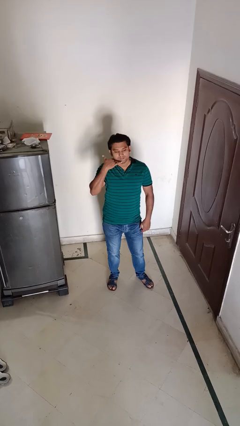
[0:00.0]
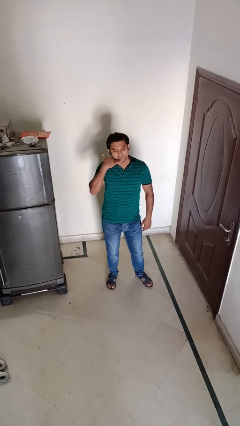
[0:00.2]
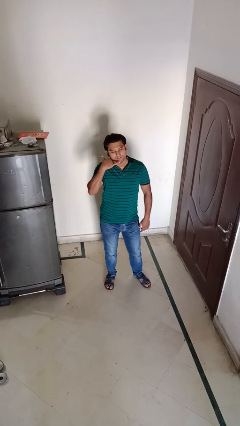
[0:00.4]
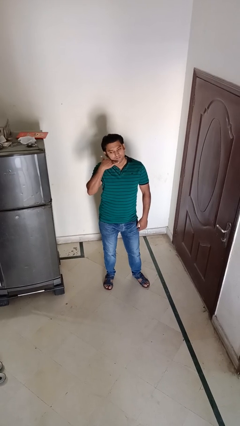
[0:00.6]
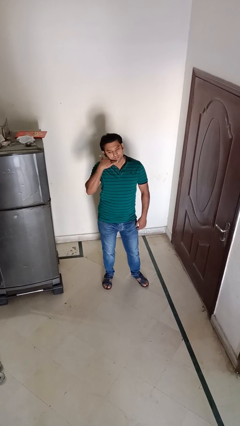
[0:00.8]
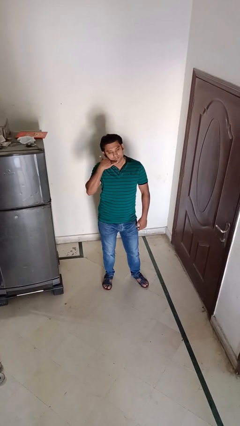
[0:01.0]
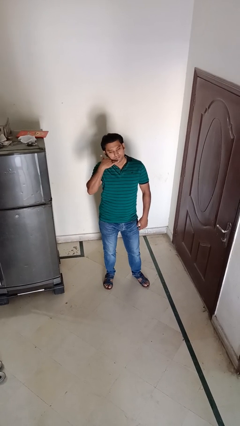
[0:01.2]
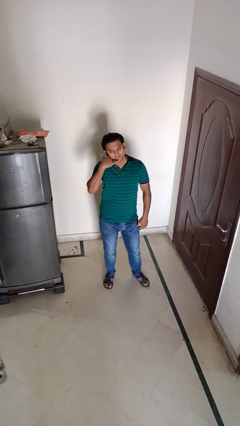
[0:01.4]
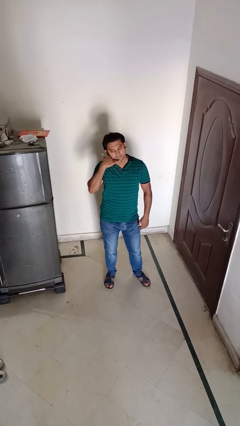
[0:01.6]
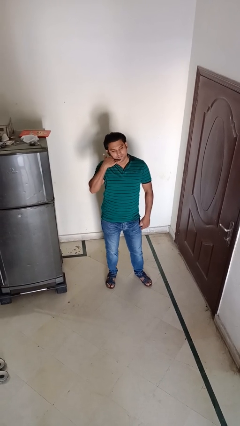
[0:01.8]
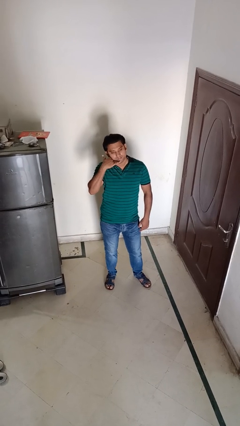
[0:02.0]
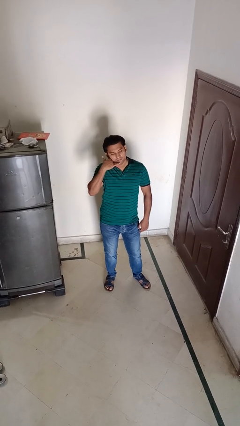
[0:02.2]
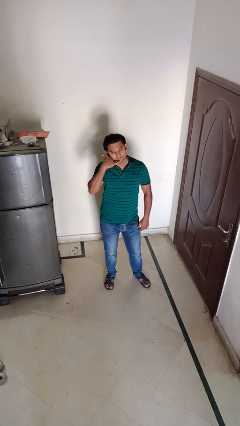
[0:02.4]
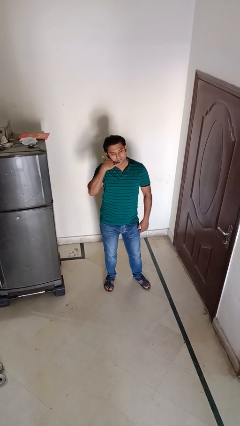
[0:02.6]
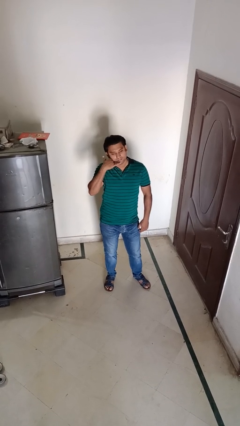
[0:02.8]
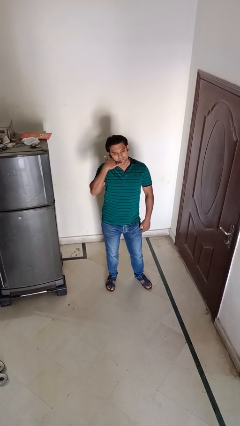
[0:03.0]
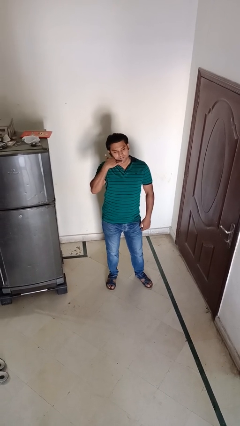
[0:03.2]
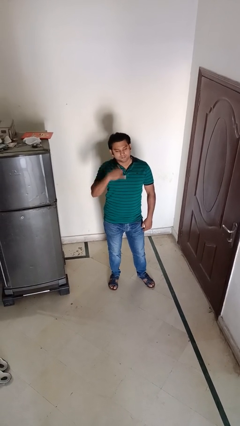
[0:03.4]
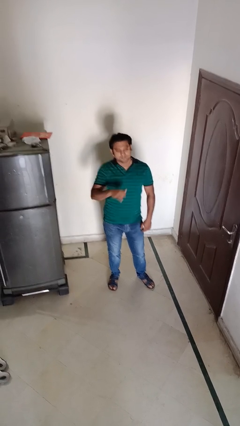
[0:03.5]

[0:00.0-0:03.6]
person gestures call me

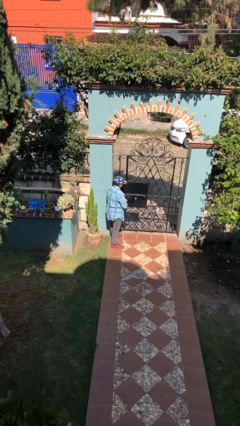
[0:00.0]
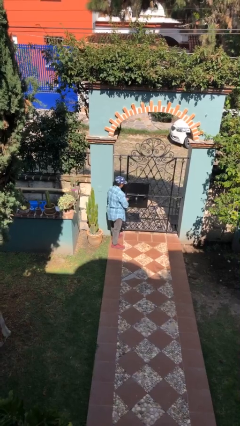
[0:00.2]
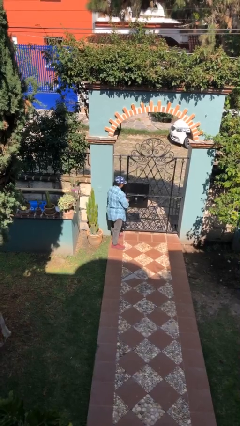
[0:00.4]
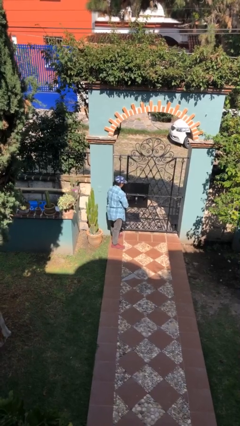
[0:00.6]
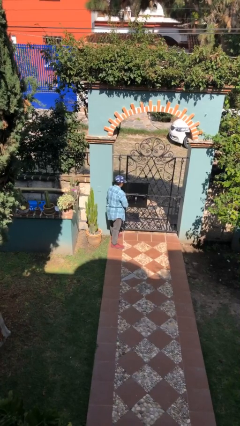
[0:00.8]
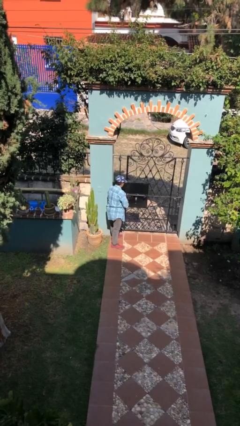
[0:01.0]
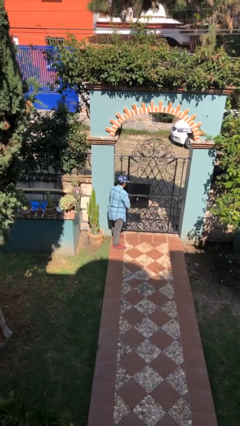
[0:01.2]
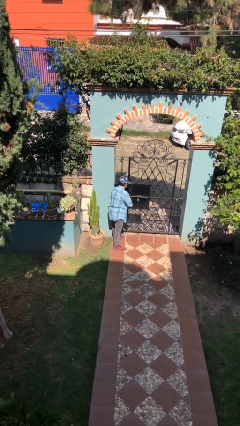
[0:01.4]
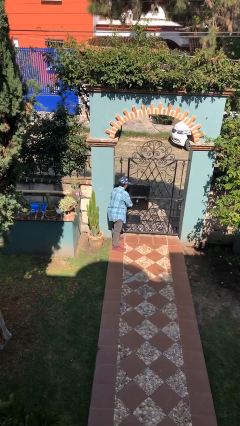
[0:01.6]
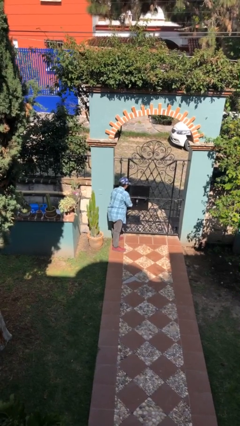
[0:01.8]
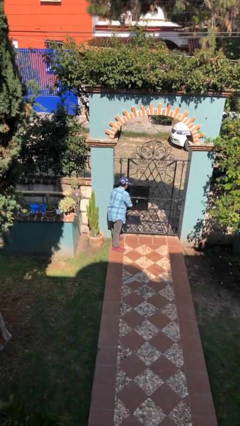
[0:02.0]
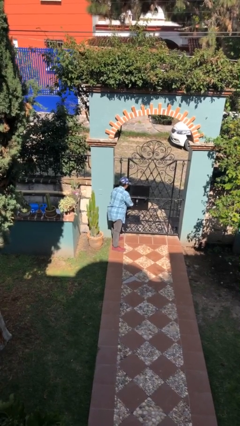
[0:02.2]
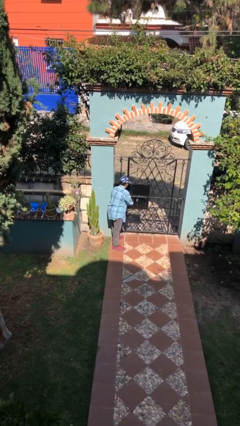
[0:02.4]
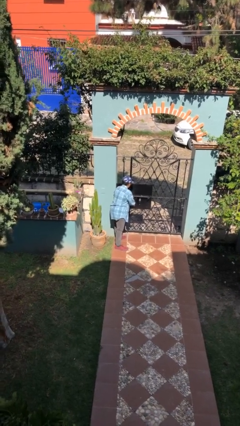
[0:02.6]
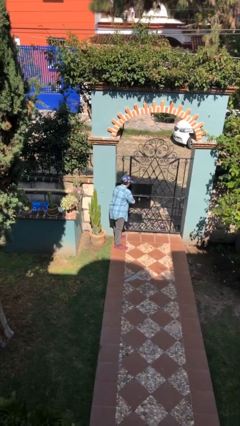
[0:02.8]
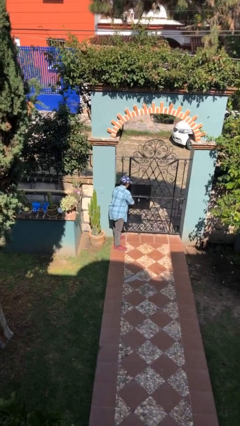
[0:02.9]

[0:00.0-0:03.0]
person unlocks door with keys

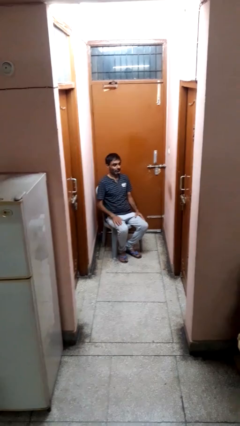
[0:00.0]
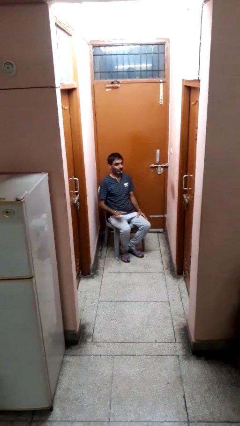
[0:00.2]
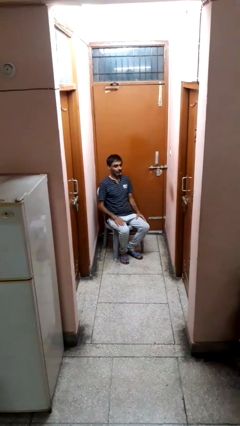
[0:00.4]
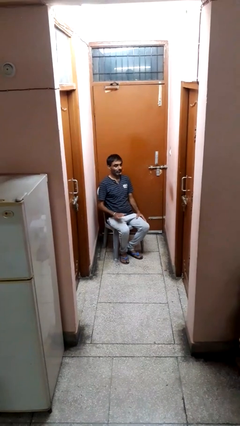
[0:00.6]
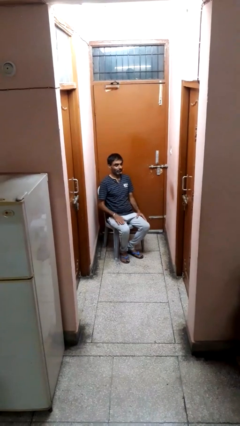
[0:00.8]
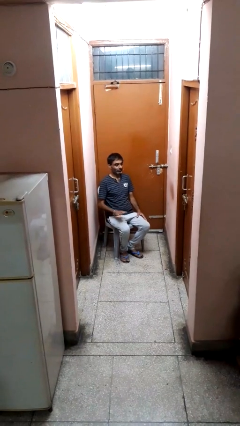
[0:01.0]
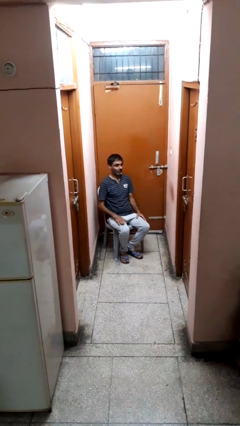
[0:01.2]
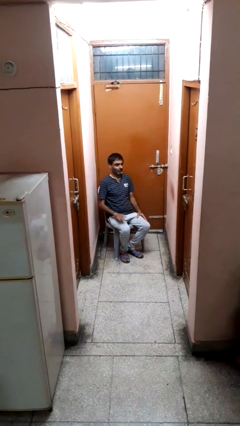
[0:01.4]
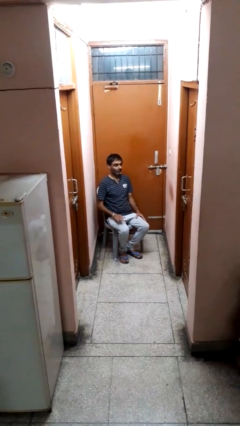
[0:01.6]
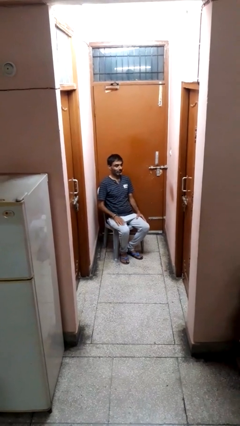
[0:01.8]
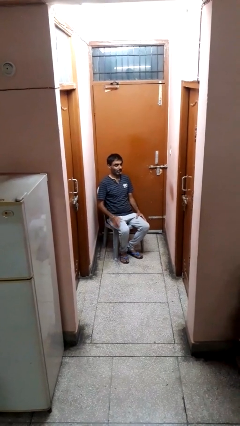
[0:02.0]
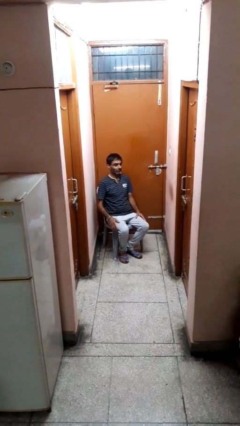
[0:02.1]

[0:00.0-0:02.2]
person slaps hands on thighs

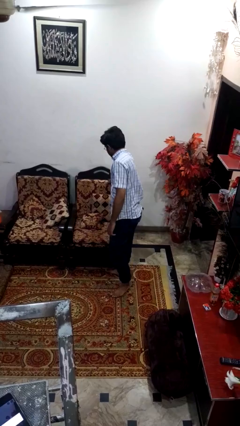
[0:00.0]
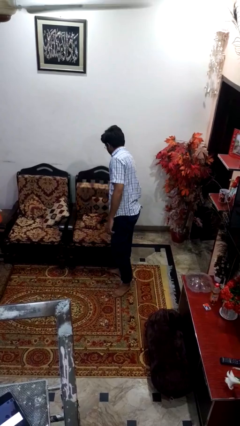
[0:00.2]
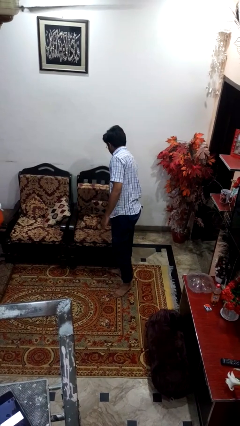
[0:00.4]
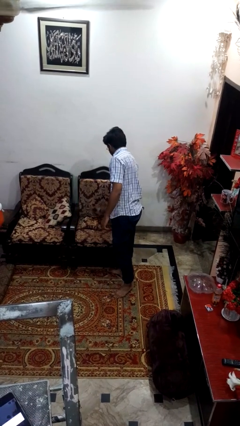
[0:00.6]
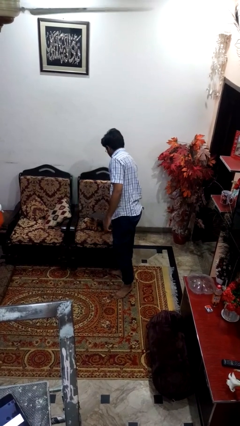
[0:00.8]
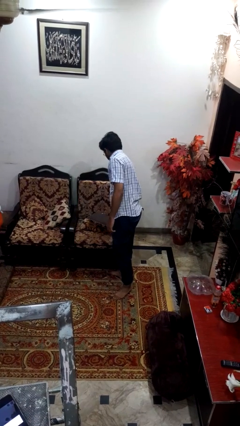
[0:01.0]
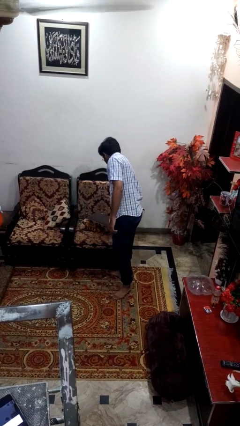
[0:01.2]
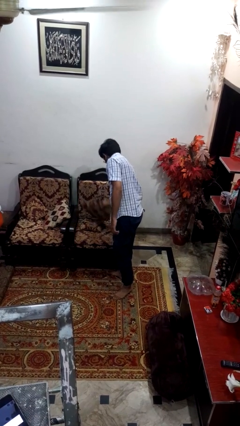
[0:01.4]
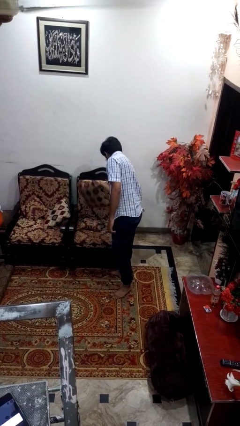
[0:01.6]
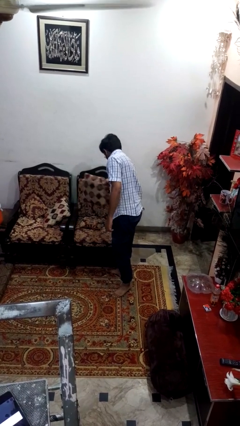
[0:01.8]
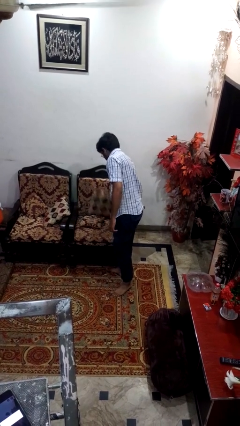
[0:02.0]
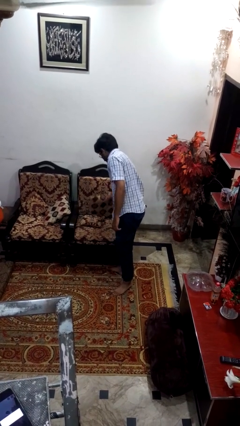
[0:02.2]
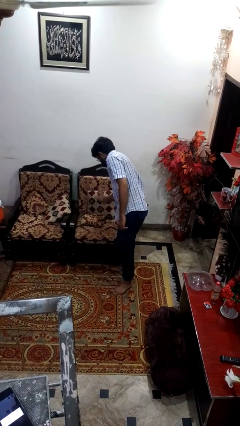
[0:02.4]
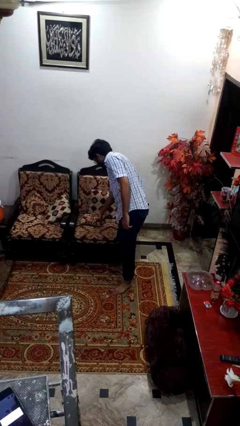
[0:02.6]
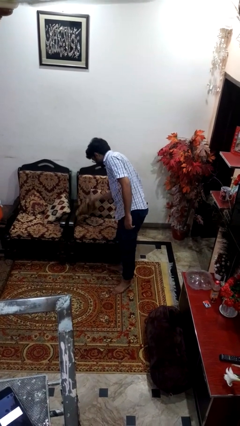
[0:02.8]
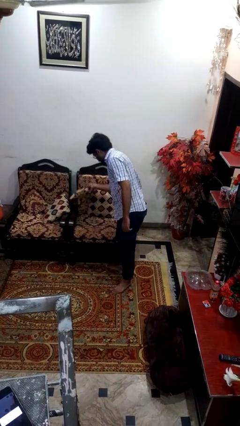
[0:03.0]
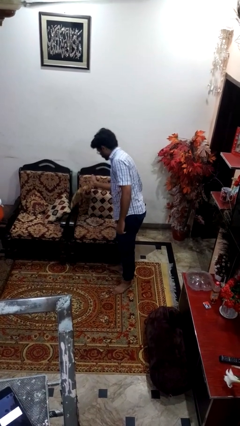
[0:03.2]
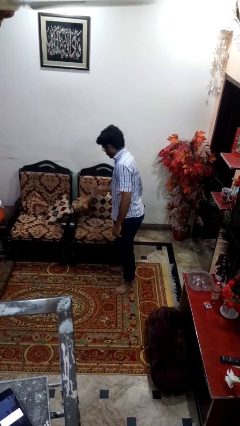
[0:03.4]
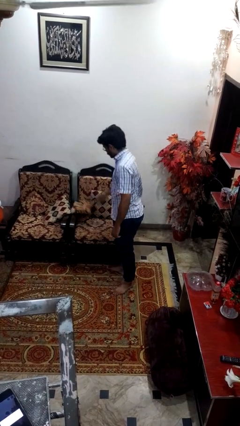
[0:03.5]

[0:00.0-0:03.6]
person searches in couch

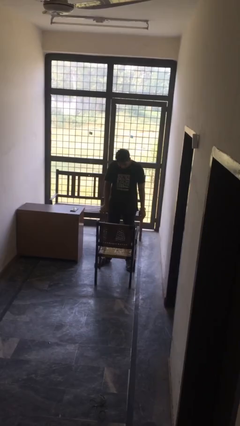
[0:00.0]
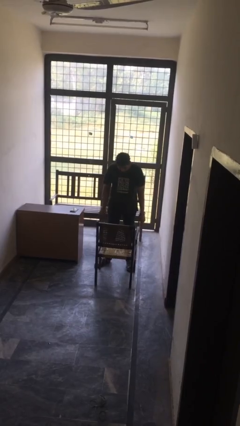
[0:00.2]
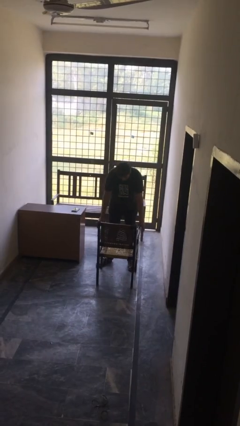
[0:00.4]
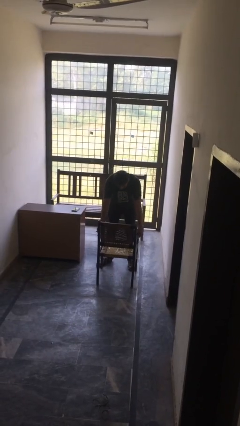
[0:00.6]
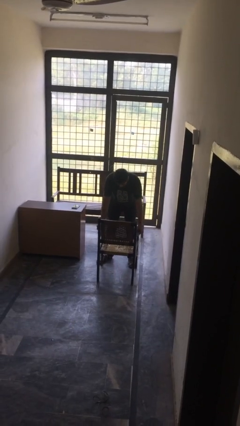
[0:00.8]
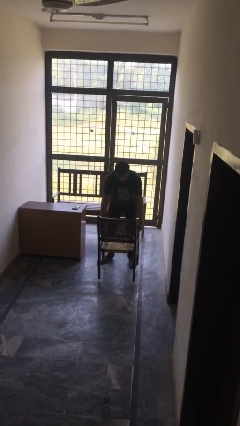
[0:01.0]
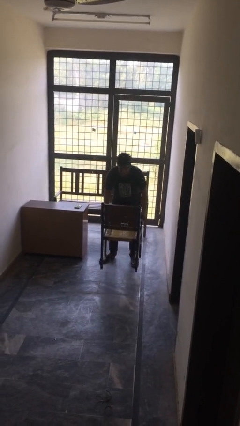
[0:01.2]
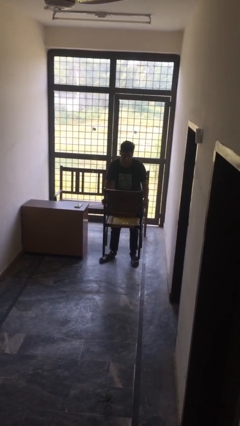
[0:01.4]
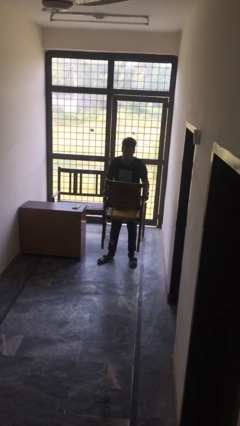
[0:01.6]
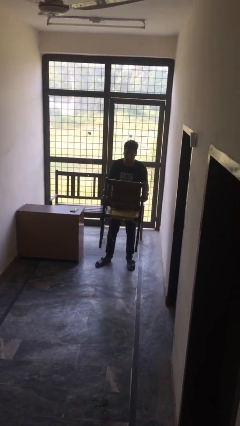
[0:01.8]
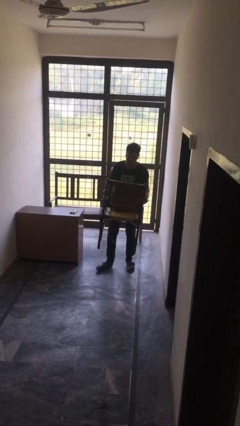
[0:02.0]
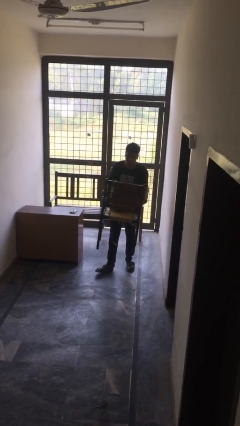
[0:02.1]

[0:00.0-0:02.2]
person picks up object from table

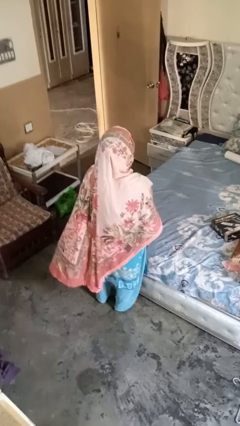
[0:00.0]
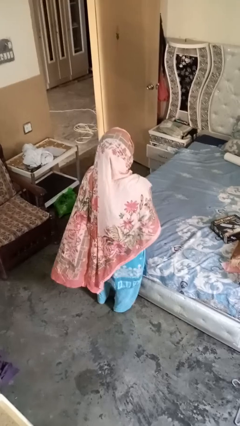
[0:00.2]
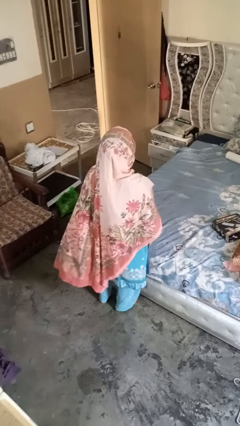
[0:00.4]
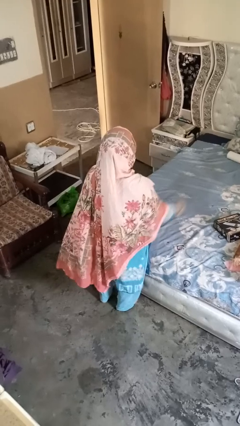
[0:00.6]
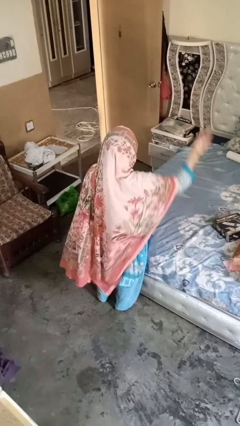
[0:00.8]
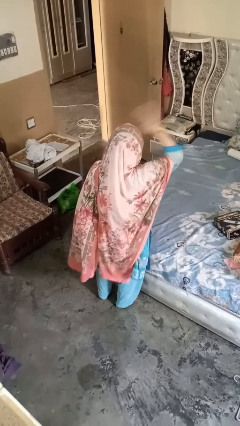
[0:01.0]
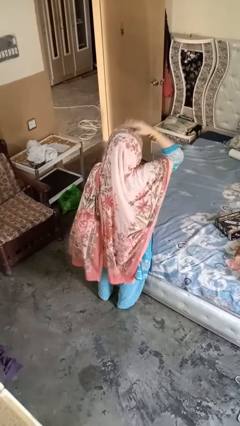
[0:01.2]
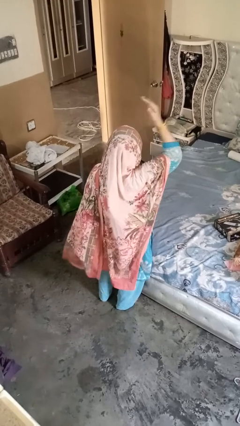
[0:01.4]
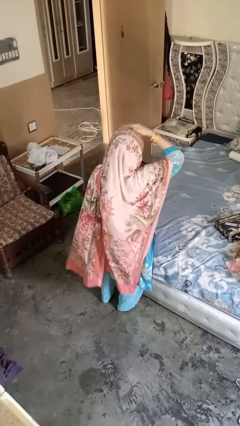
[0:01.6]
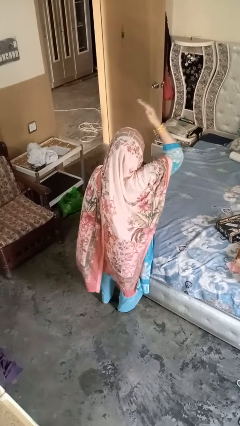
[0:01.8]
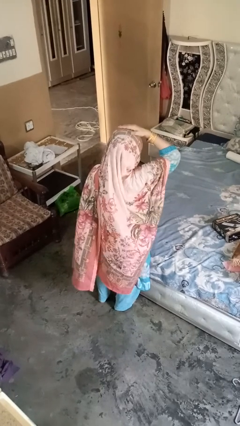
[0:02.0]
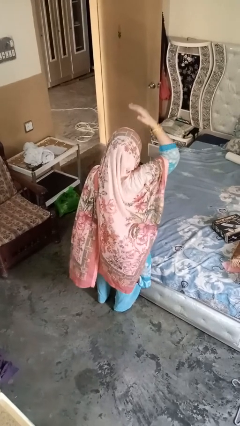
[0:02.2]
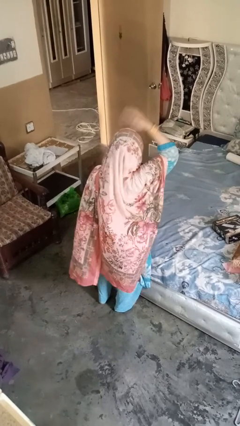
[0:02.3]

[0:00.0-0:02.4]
person pats head

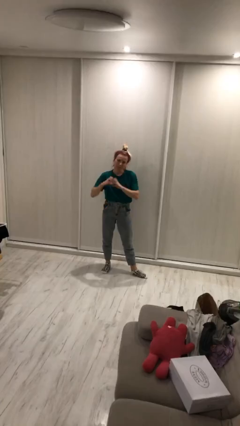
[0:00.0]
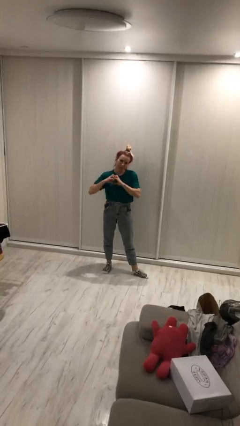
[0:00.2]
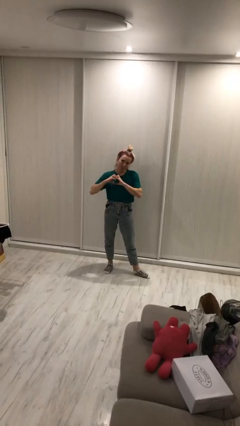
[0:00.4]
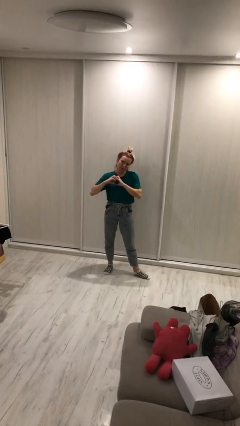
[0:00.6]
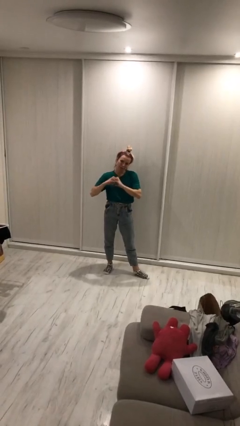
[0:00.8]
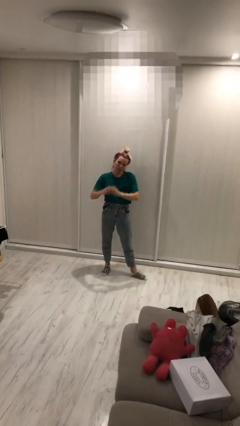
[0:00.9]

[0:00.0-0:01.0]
person gestures heart
